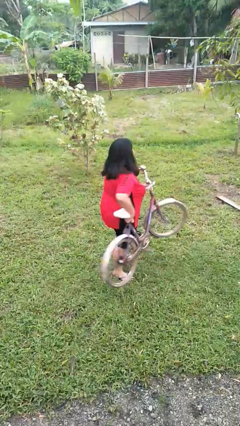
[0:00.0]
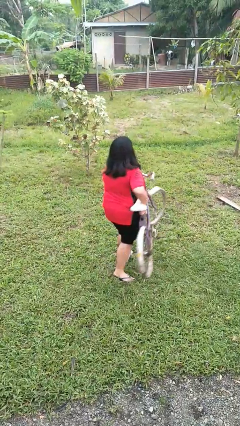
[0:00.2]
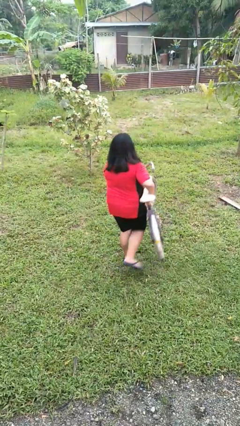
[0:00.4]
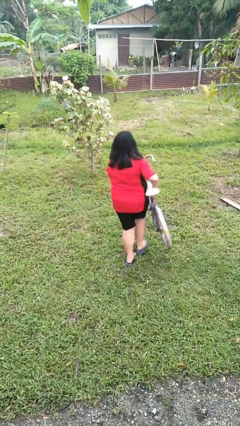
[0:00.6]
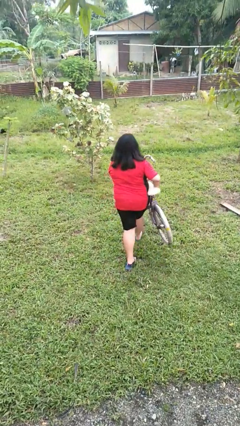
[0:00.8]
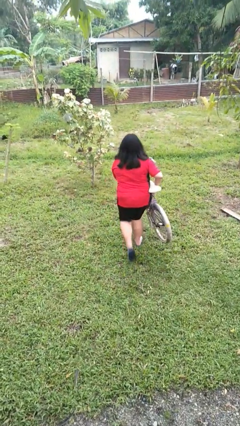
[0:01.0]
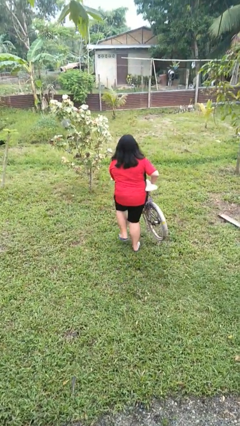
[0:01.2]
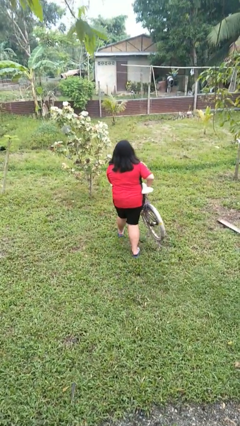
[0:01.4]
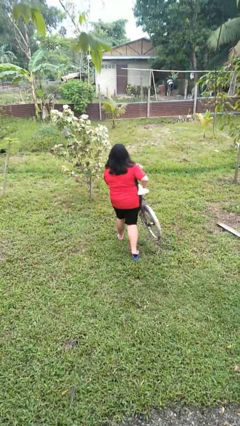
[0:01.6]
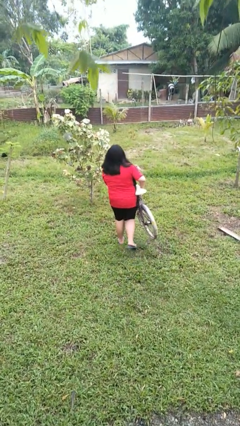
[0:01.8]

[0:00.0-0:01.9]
person carries bicycle

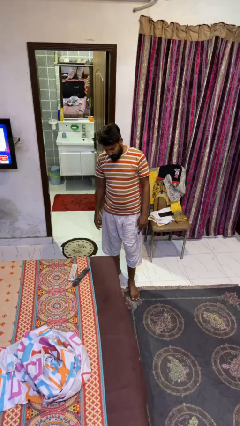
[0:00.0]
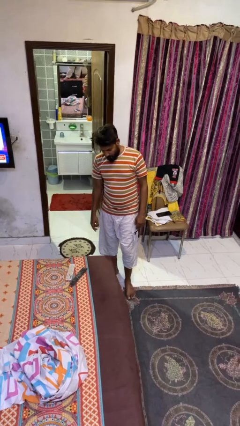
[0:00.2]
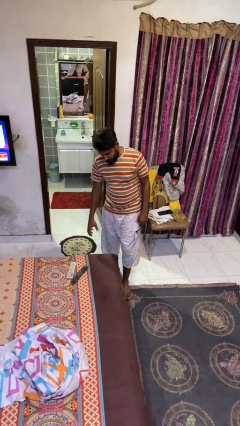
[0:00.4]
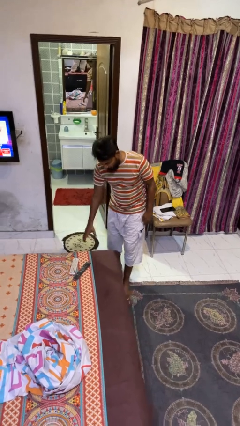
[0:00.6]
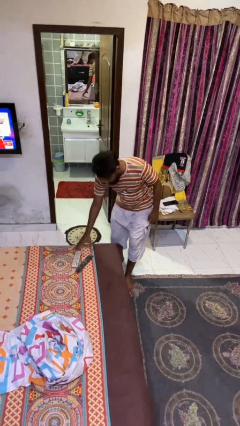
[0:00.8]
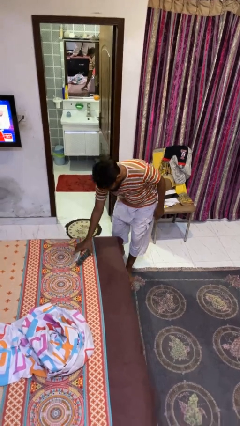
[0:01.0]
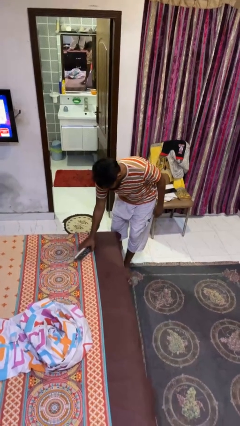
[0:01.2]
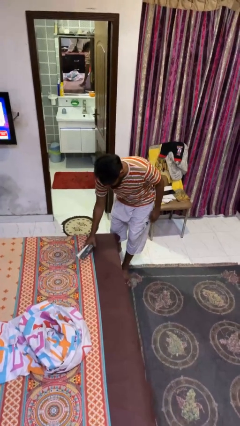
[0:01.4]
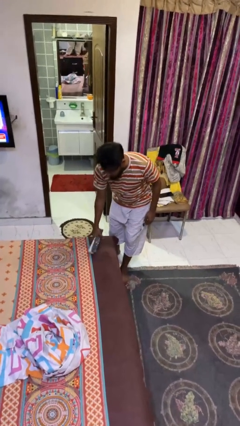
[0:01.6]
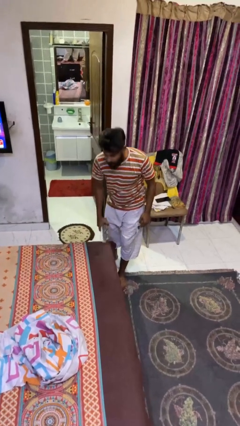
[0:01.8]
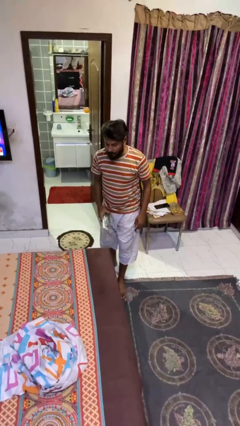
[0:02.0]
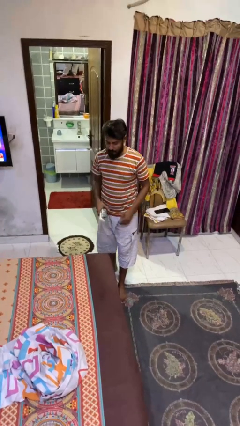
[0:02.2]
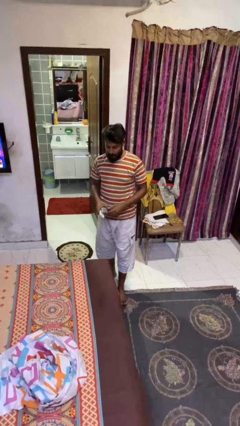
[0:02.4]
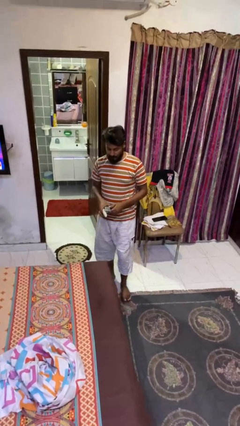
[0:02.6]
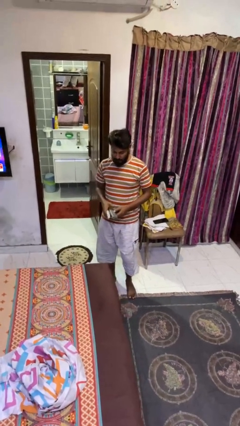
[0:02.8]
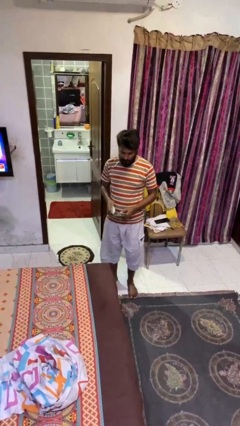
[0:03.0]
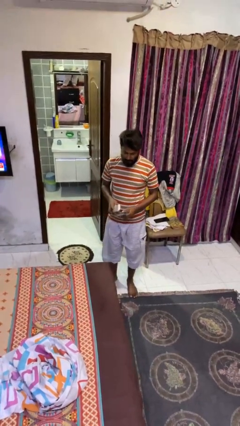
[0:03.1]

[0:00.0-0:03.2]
person picks up object from bed

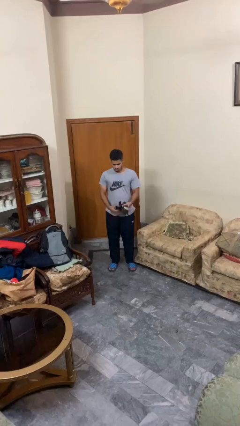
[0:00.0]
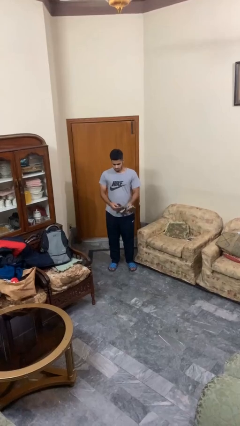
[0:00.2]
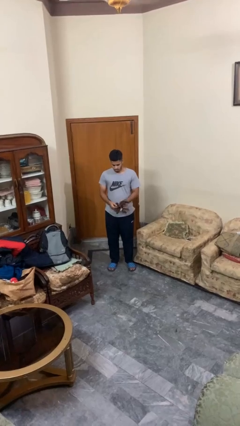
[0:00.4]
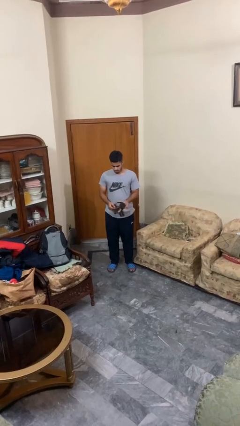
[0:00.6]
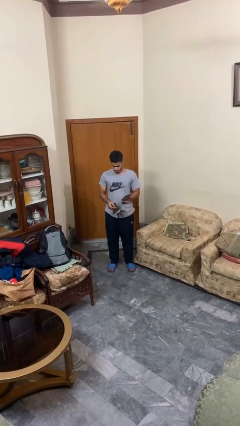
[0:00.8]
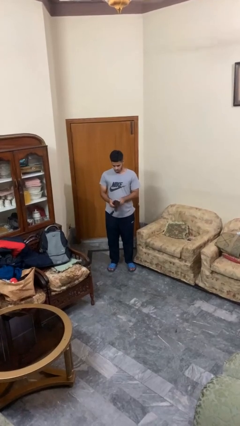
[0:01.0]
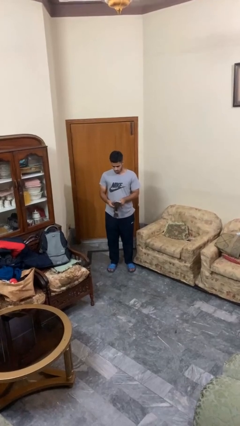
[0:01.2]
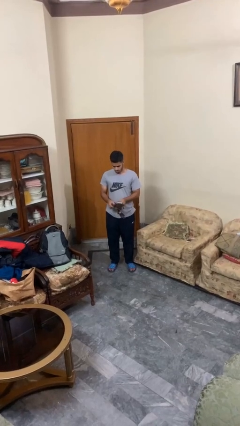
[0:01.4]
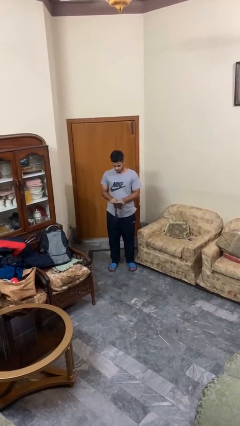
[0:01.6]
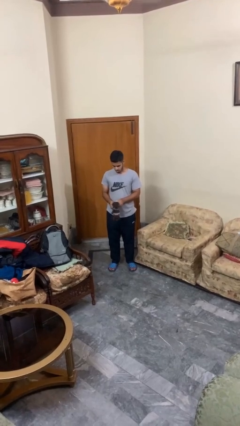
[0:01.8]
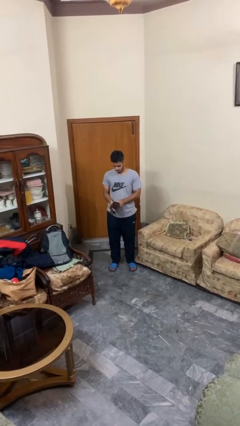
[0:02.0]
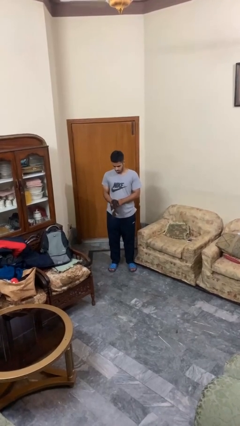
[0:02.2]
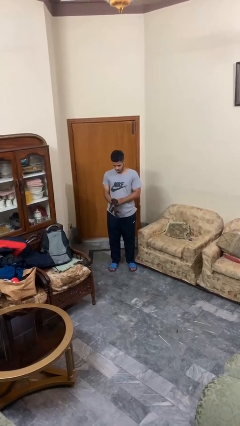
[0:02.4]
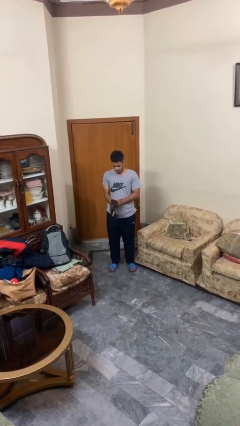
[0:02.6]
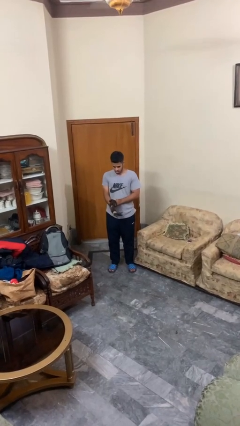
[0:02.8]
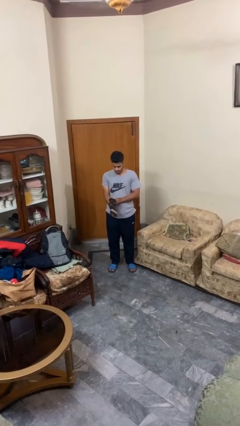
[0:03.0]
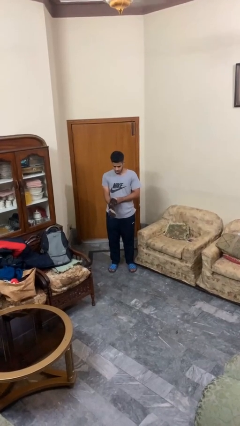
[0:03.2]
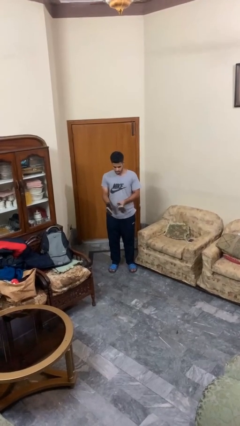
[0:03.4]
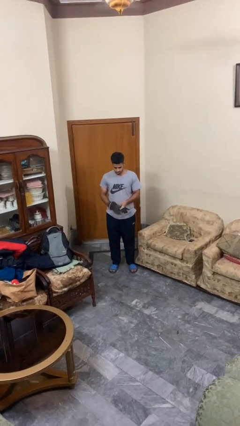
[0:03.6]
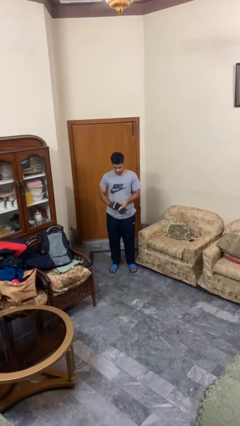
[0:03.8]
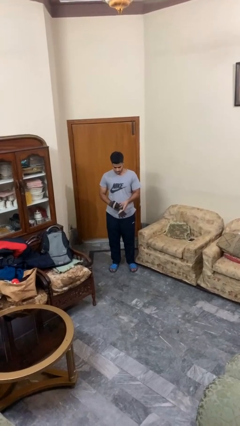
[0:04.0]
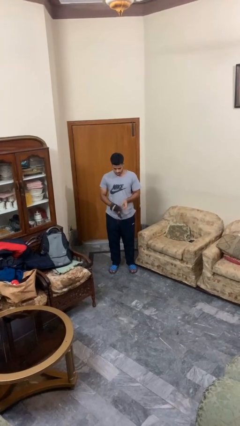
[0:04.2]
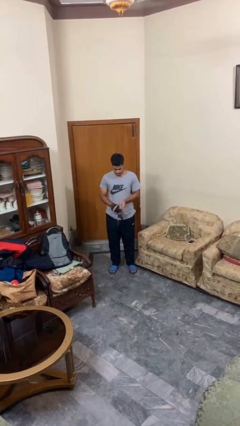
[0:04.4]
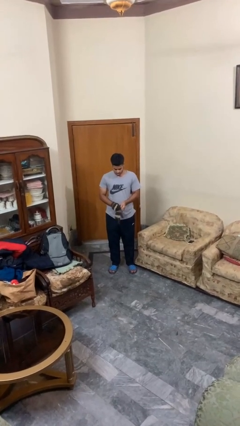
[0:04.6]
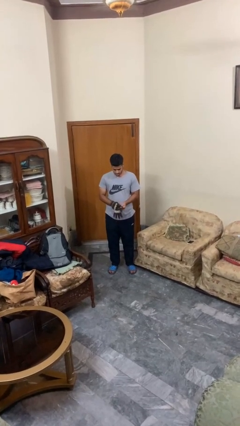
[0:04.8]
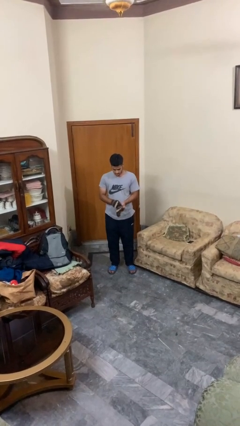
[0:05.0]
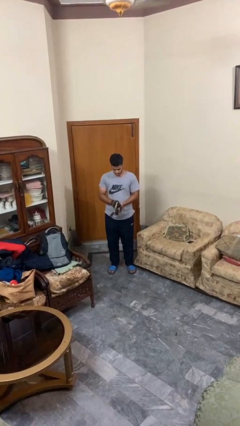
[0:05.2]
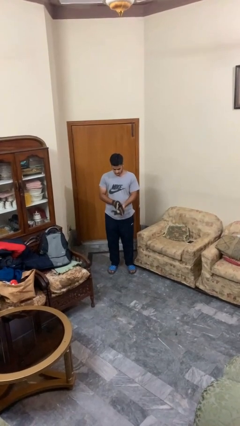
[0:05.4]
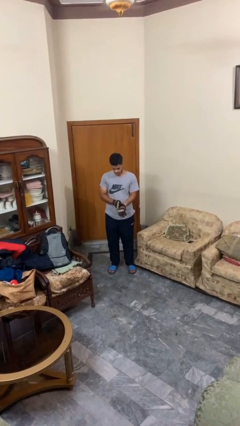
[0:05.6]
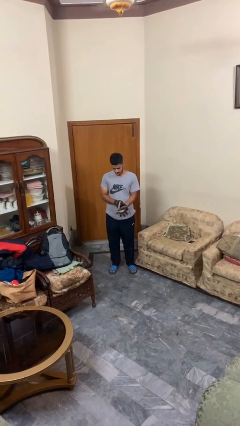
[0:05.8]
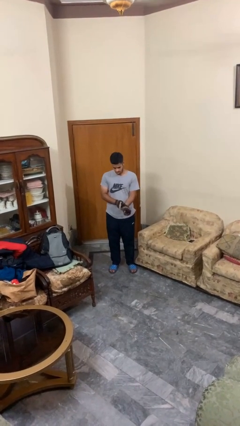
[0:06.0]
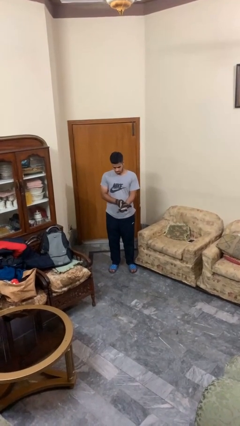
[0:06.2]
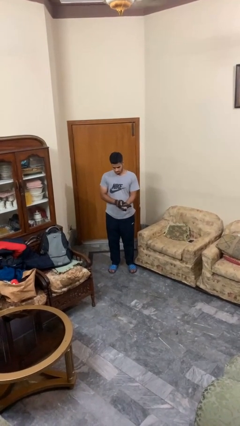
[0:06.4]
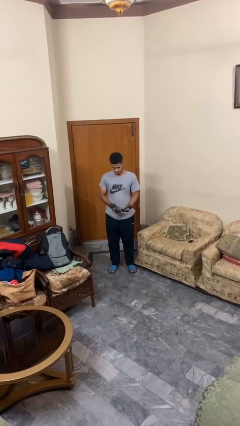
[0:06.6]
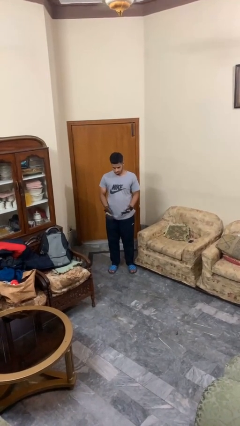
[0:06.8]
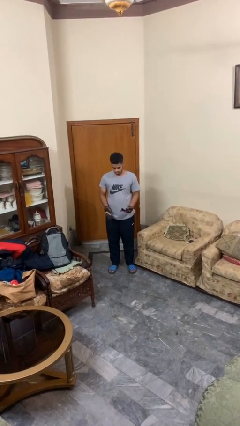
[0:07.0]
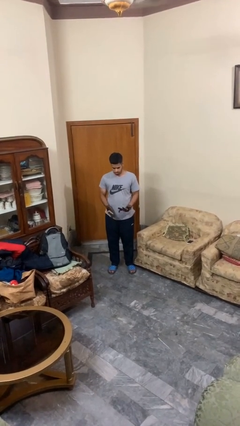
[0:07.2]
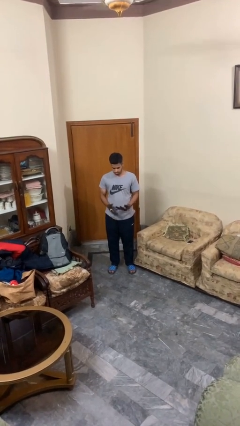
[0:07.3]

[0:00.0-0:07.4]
person puts on gloves

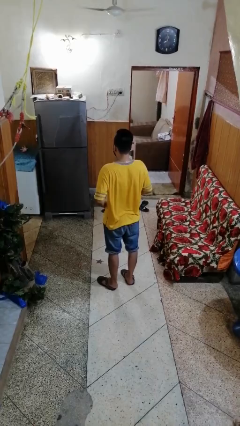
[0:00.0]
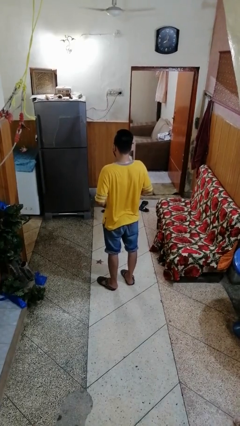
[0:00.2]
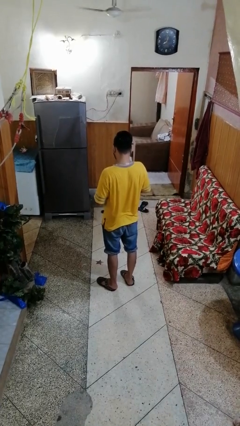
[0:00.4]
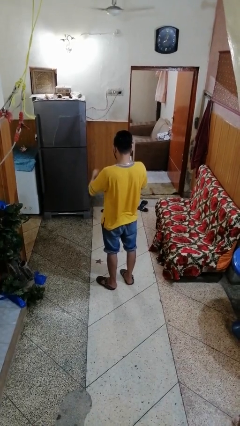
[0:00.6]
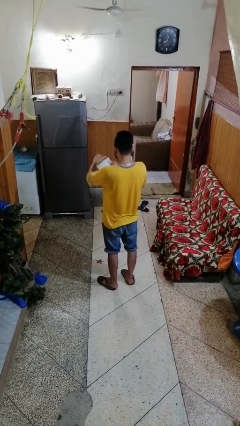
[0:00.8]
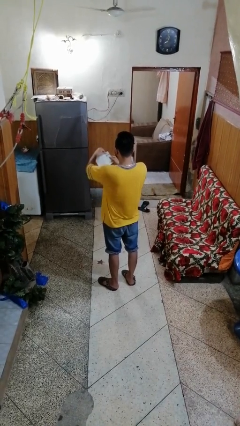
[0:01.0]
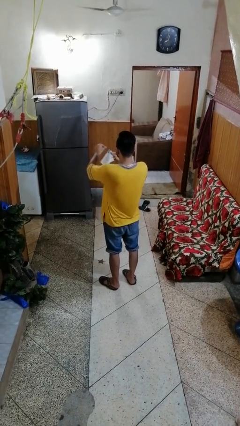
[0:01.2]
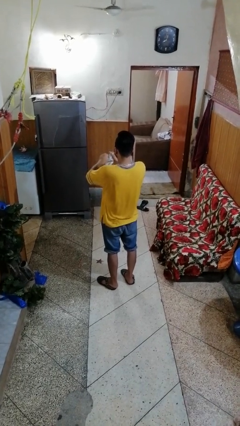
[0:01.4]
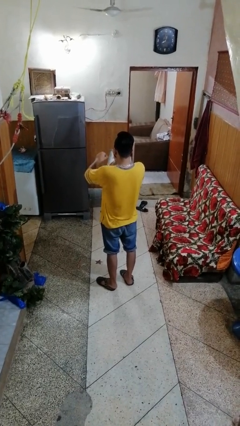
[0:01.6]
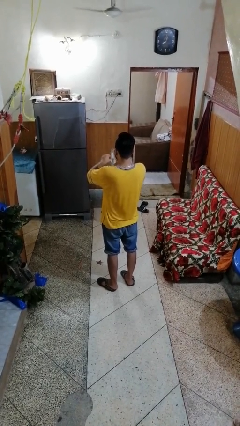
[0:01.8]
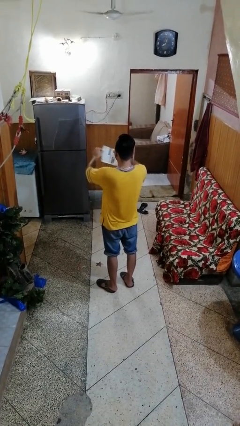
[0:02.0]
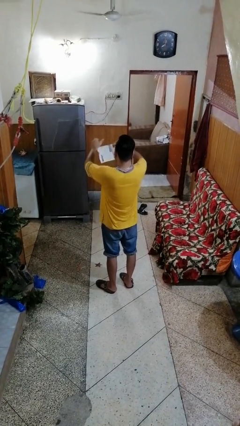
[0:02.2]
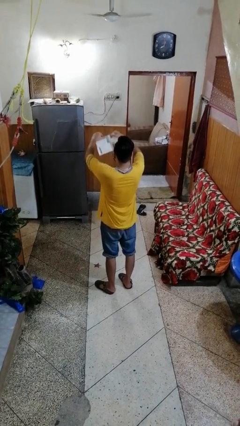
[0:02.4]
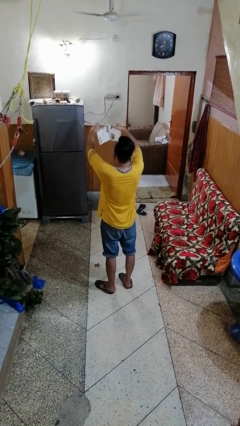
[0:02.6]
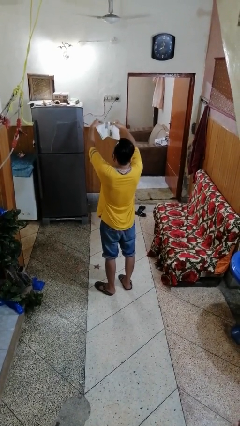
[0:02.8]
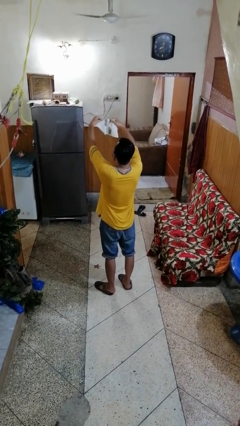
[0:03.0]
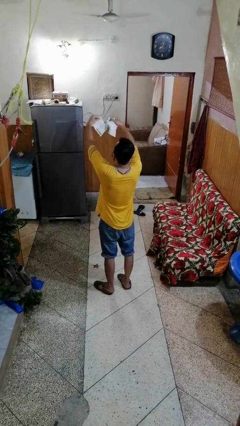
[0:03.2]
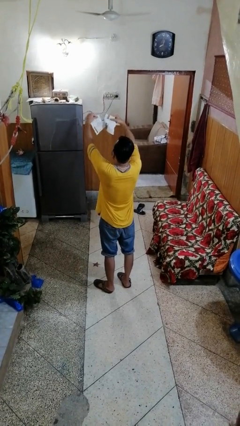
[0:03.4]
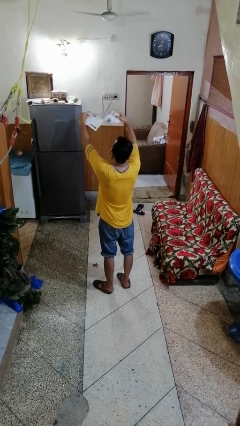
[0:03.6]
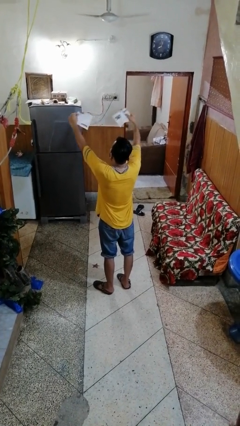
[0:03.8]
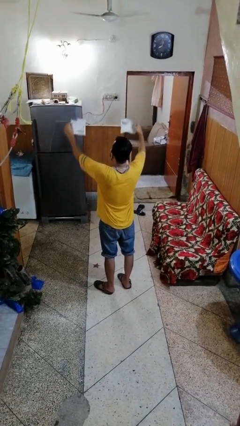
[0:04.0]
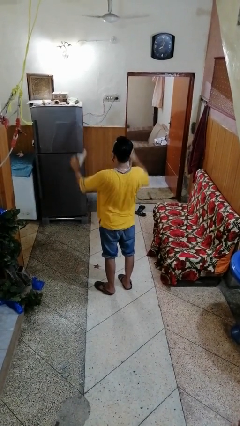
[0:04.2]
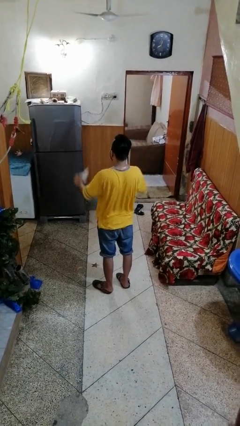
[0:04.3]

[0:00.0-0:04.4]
person tears paper

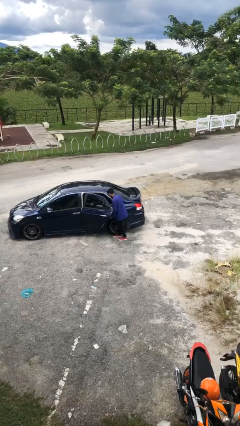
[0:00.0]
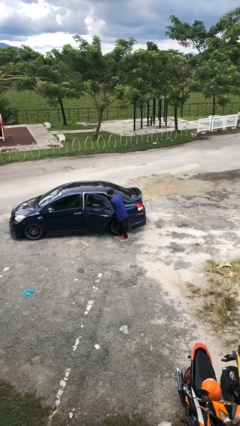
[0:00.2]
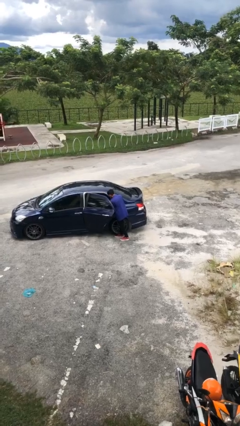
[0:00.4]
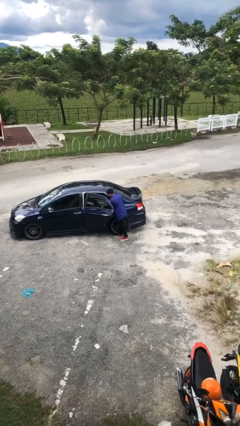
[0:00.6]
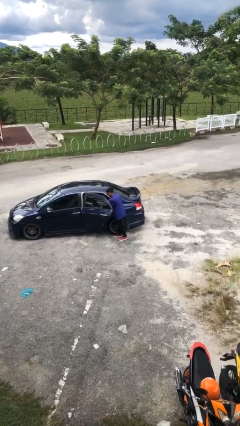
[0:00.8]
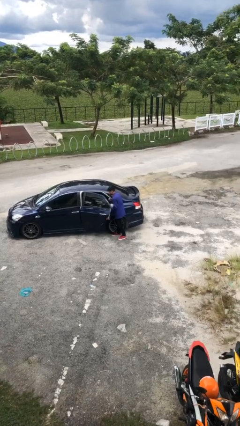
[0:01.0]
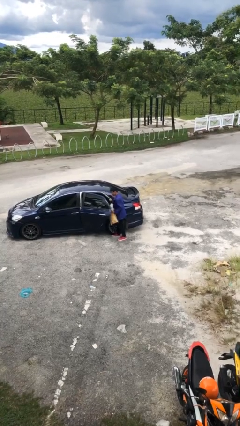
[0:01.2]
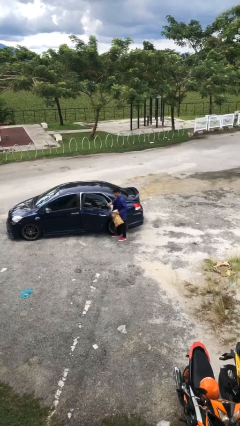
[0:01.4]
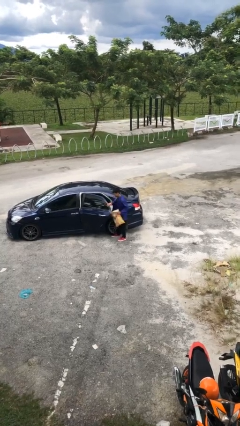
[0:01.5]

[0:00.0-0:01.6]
person unloads car
